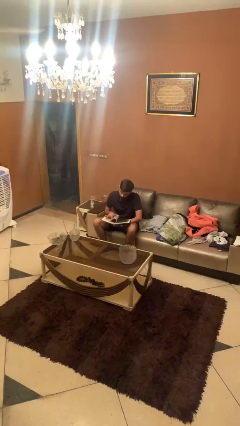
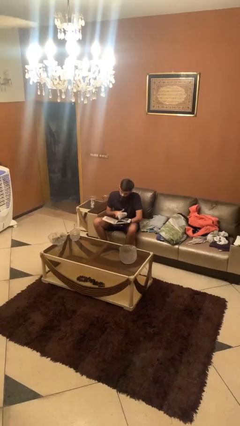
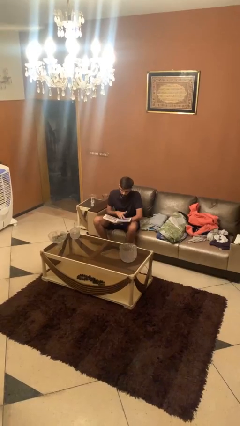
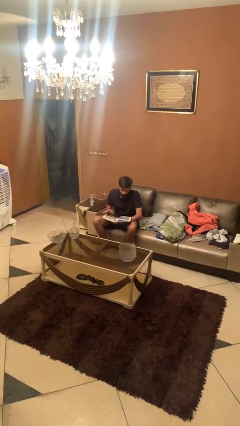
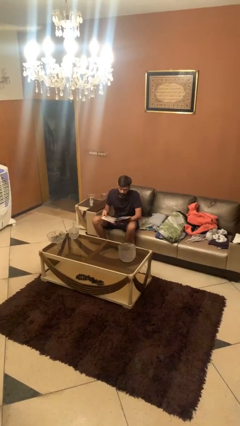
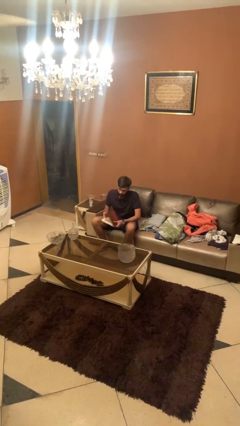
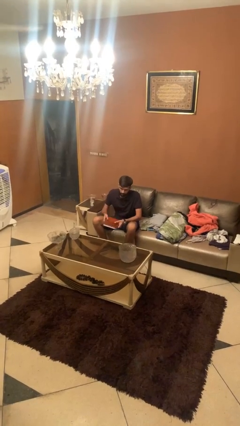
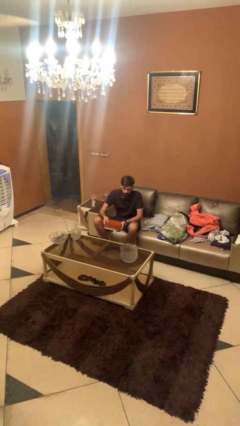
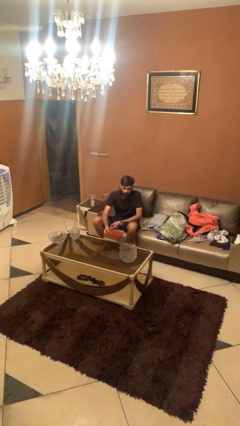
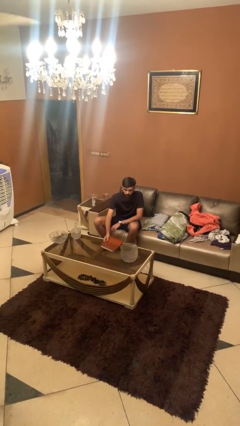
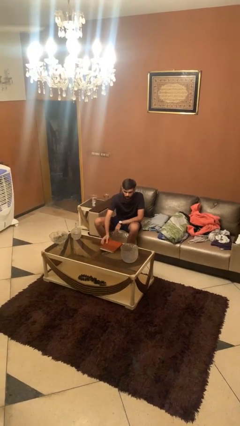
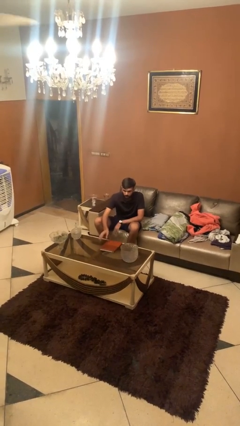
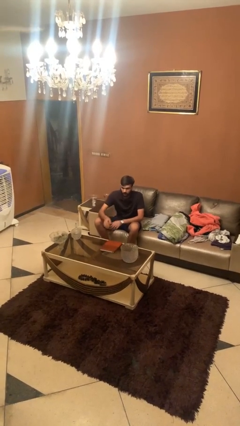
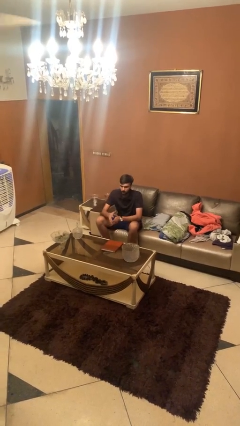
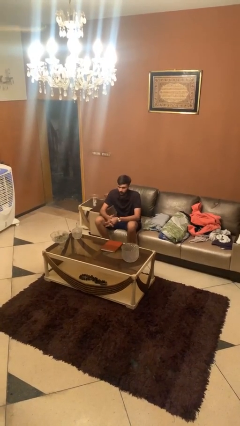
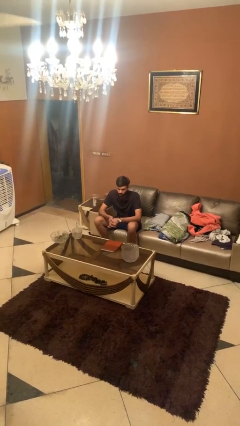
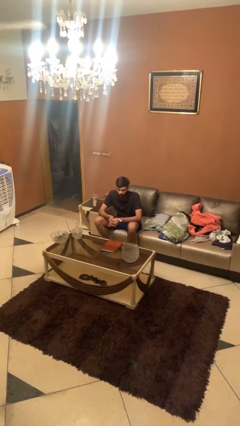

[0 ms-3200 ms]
person puts down object on table

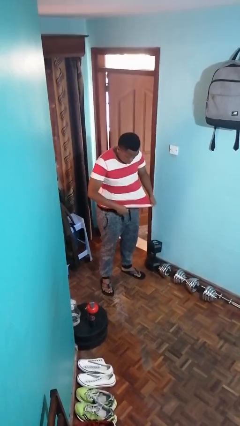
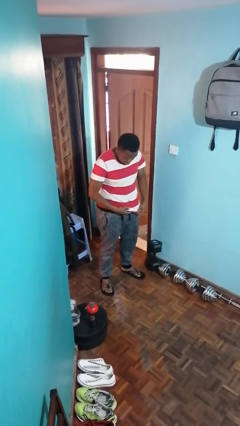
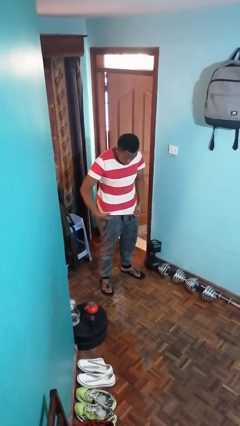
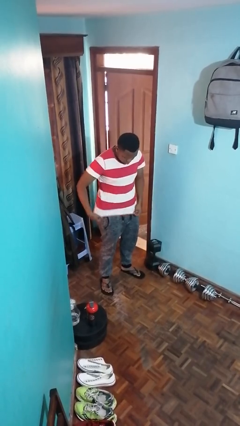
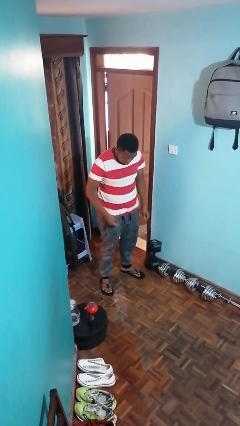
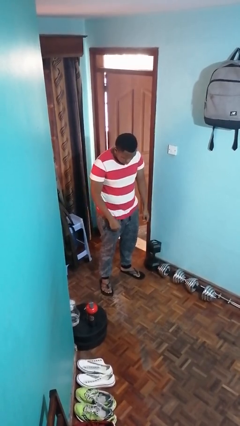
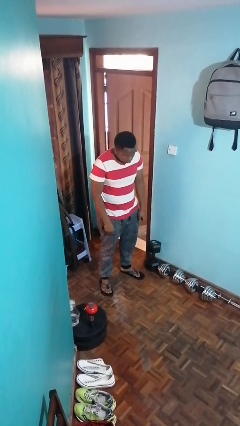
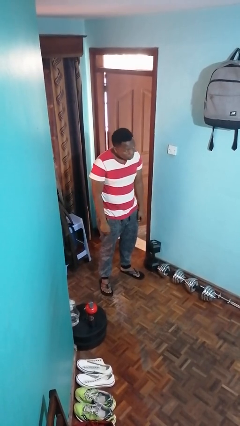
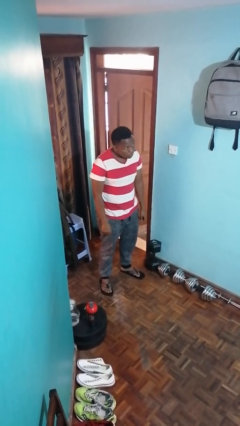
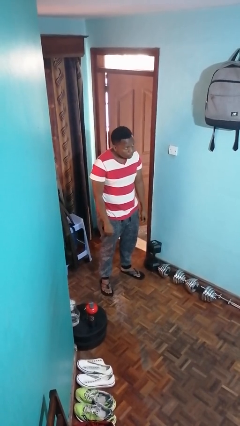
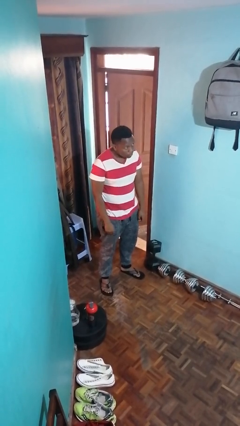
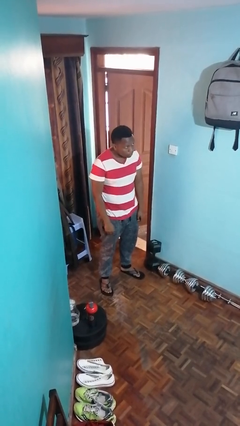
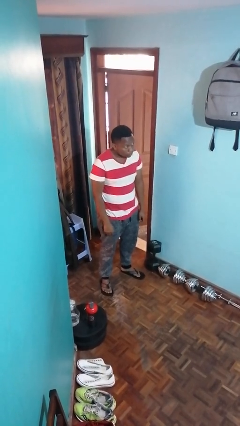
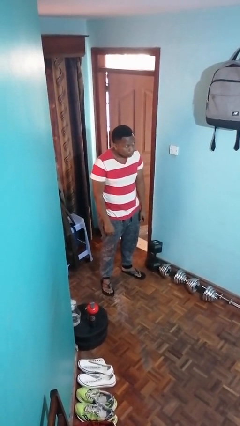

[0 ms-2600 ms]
person untucks shirt

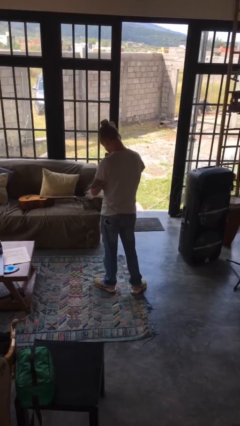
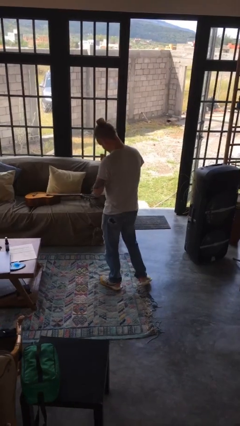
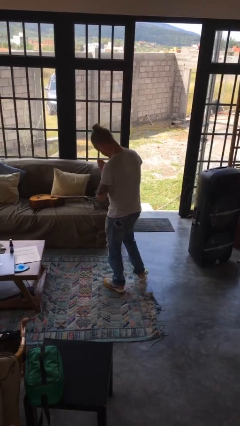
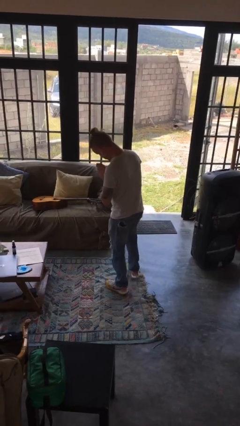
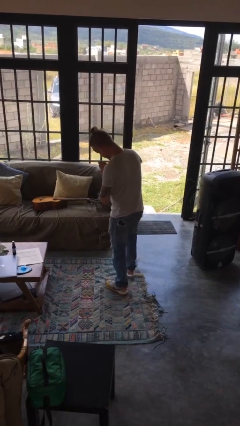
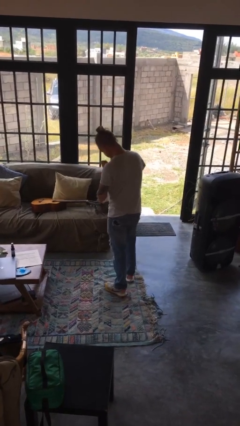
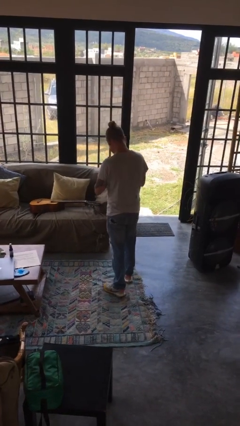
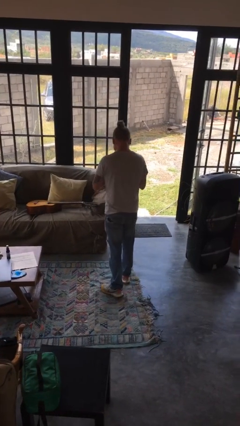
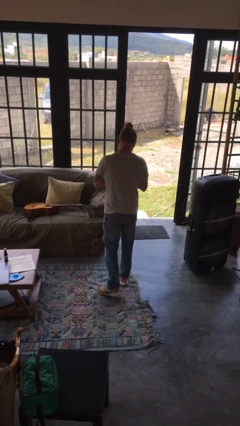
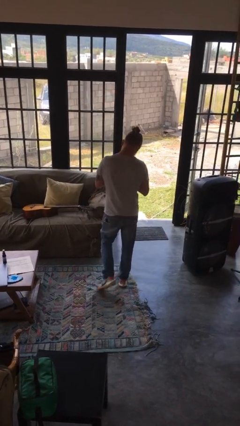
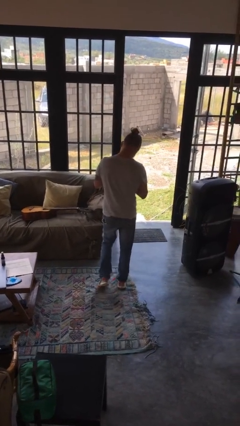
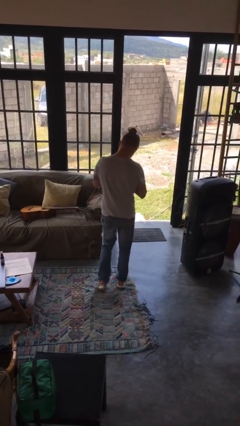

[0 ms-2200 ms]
person prays

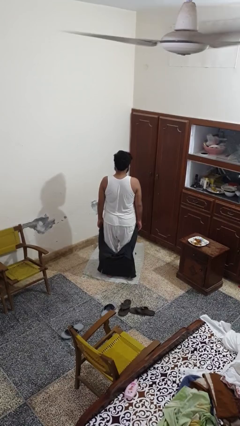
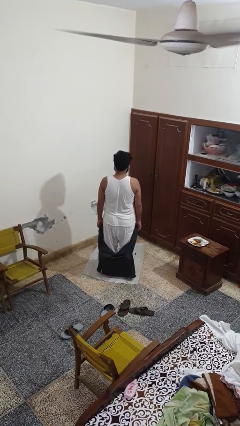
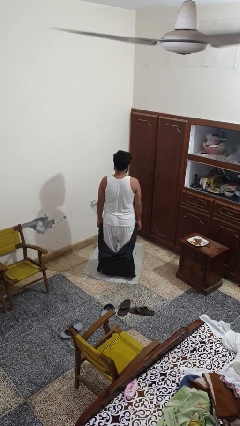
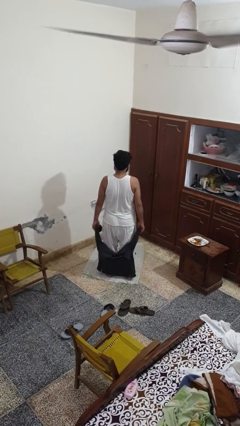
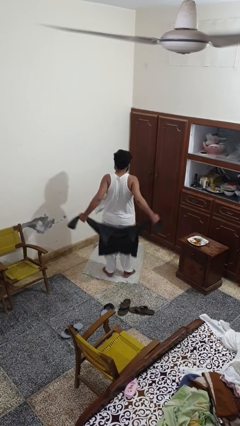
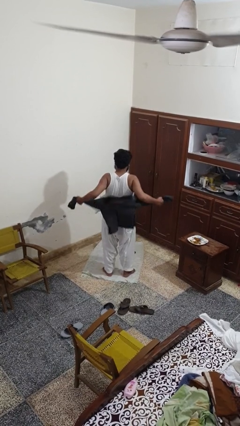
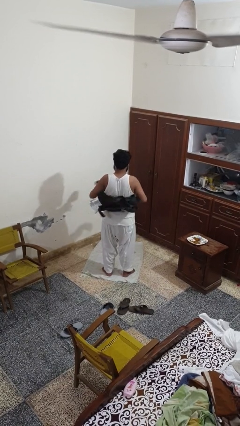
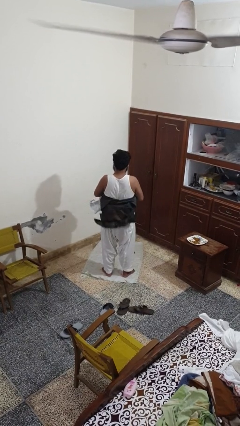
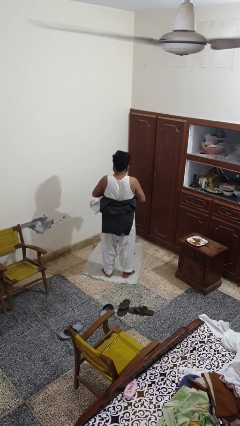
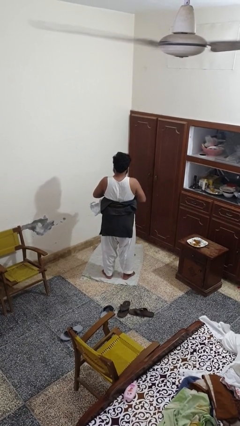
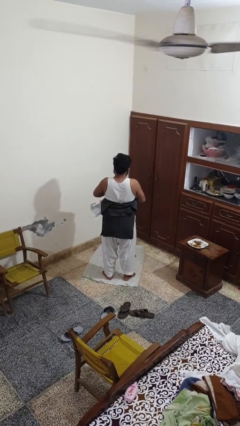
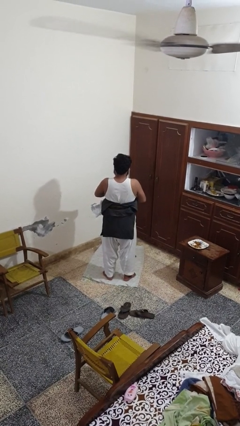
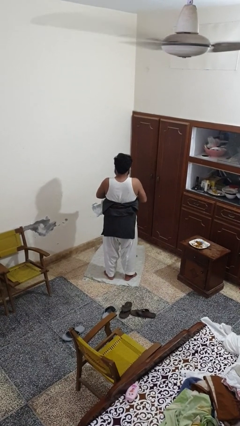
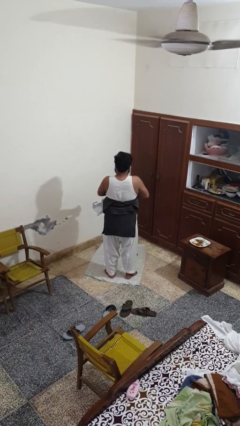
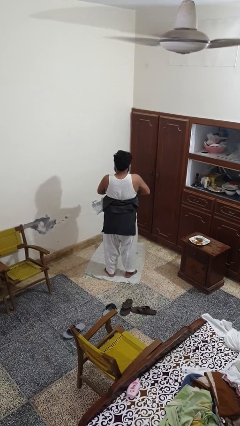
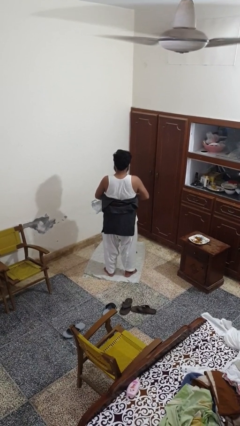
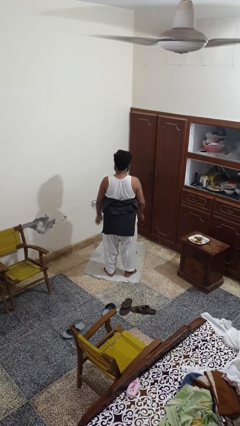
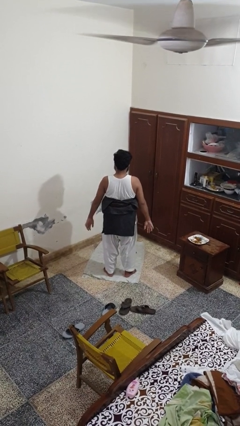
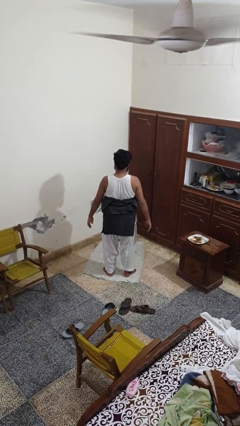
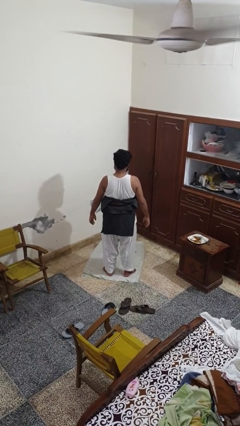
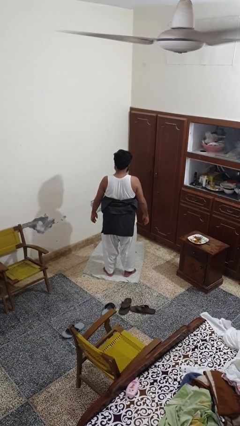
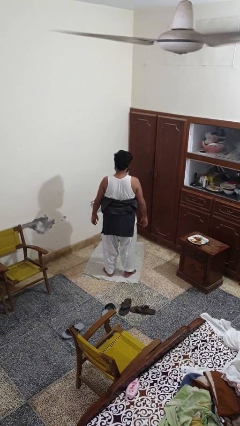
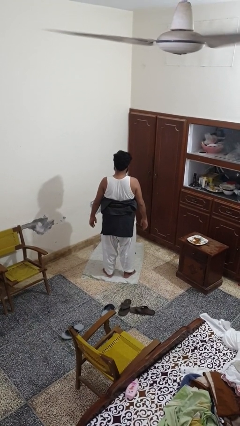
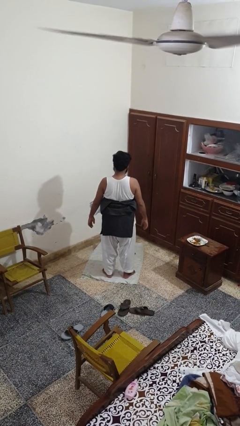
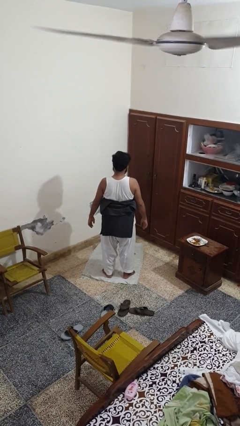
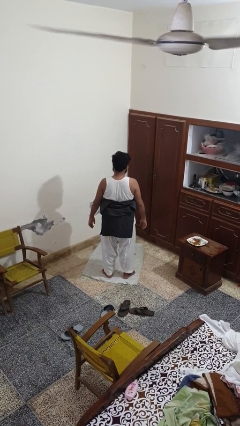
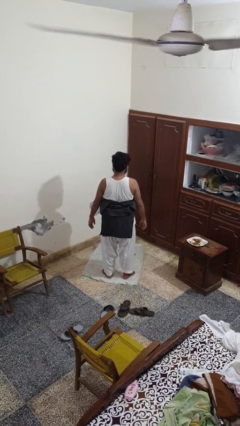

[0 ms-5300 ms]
person ties jacket around waist

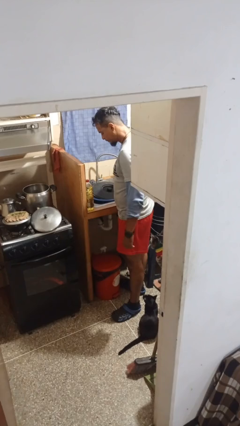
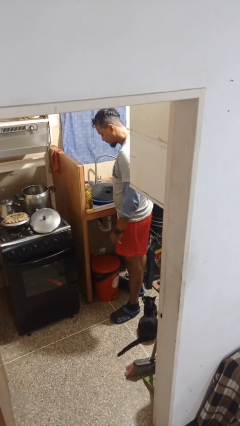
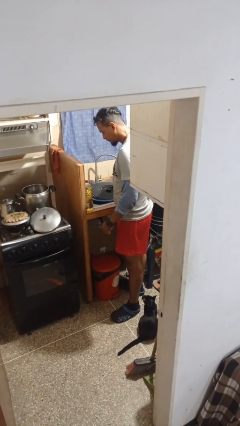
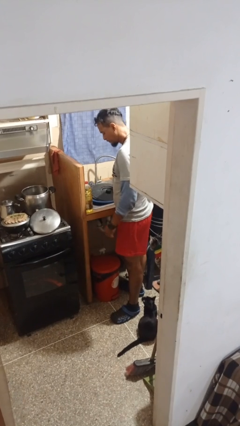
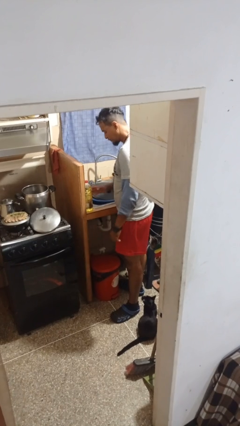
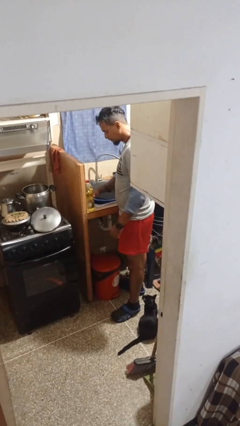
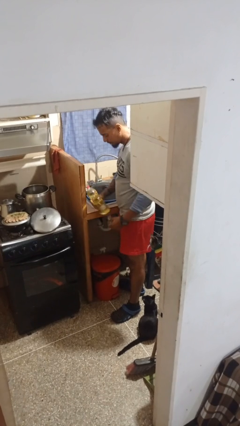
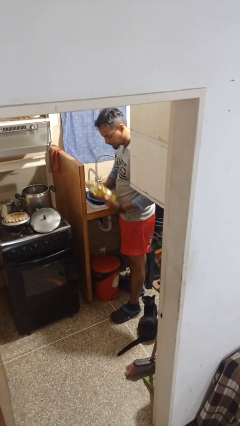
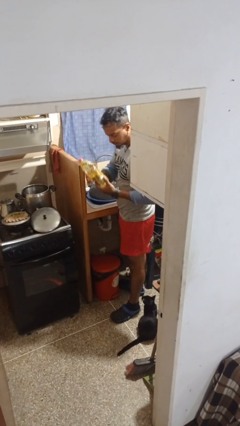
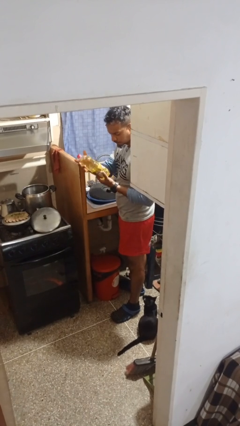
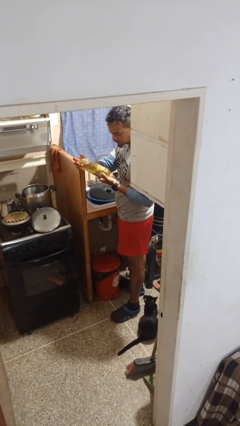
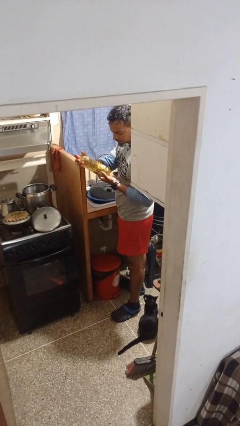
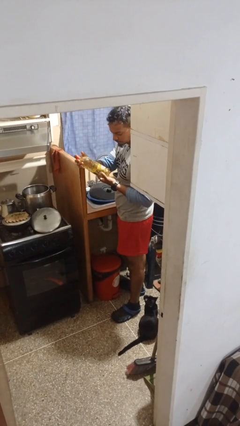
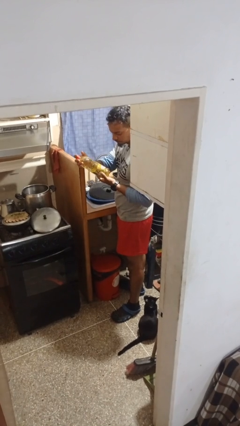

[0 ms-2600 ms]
person picks up object from countertop

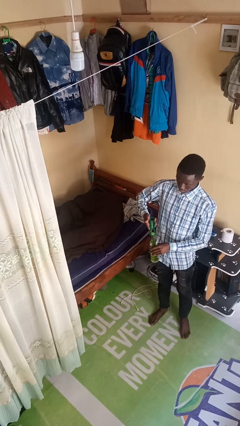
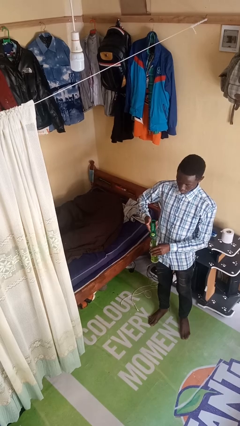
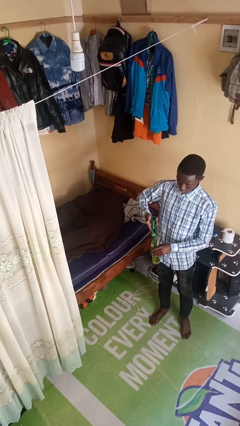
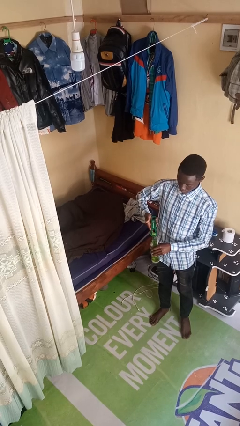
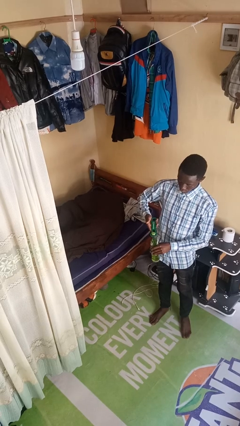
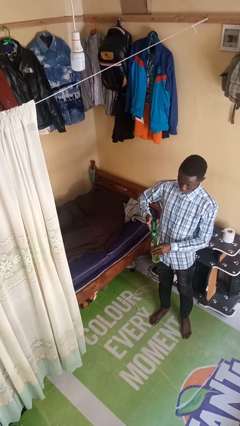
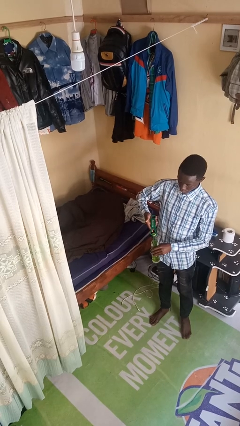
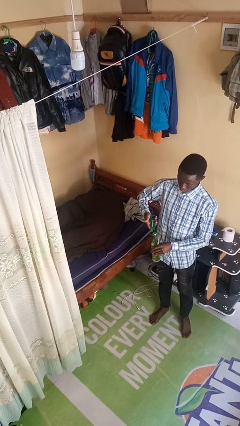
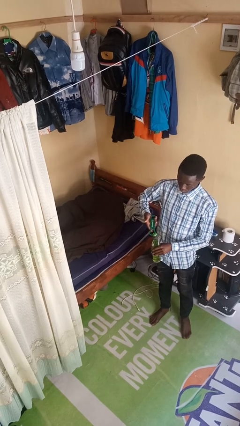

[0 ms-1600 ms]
person opens can with can opener
